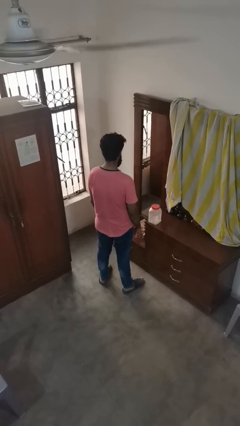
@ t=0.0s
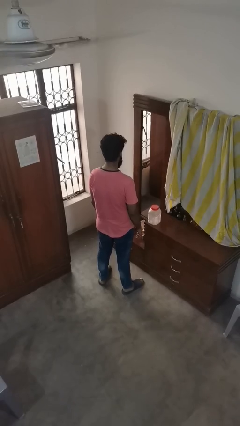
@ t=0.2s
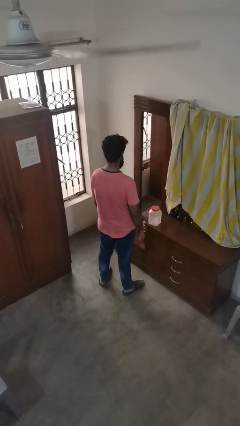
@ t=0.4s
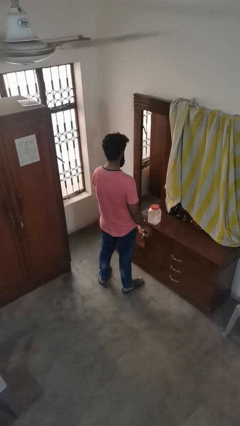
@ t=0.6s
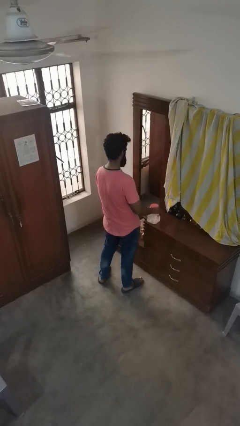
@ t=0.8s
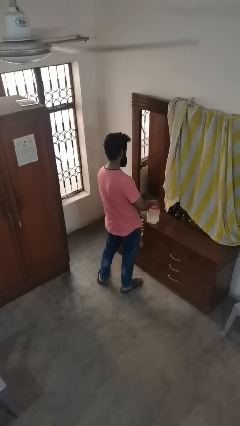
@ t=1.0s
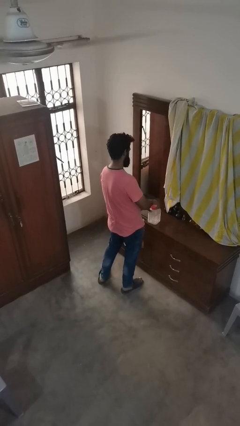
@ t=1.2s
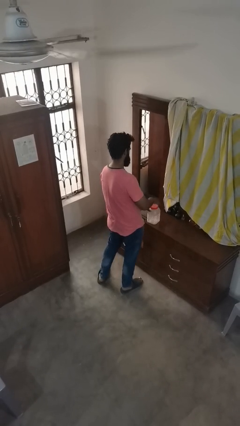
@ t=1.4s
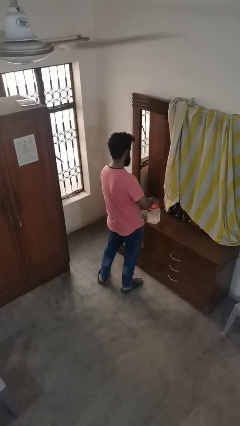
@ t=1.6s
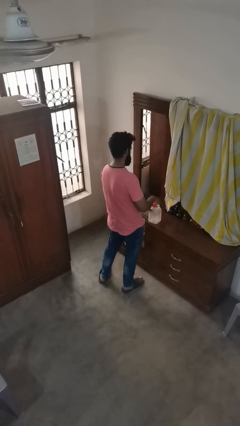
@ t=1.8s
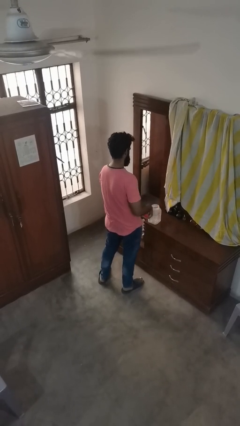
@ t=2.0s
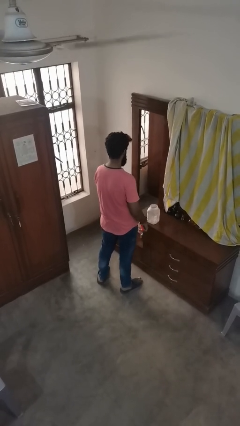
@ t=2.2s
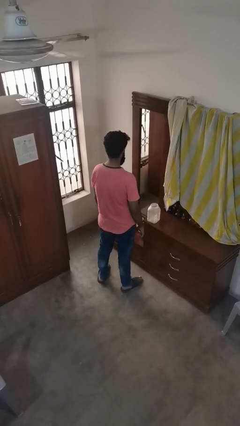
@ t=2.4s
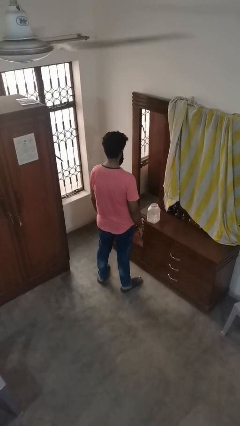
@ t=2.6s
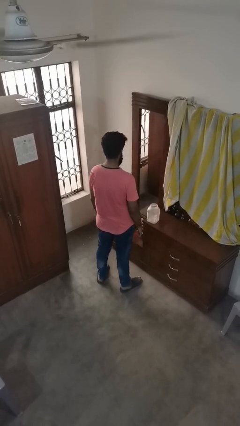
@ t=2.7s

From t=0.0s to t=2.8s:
person opens jar

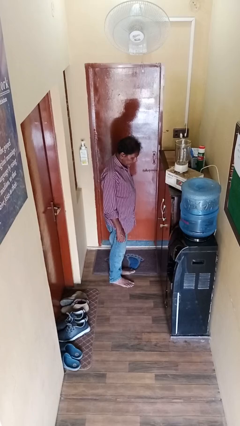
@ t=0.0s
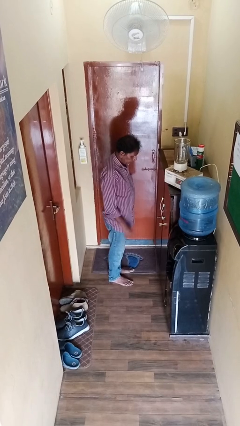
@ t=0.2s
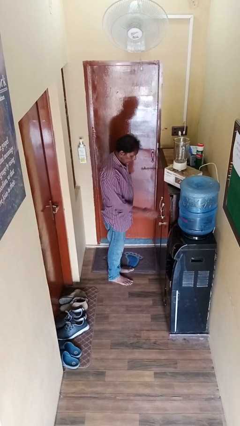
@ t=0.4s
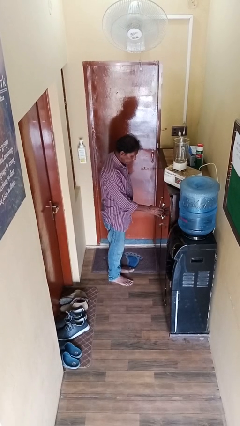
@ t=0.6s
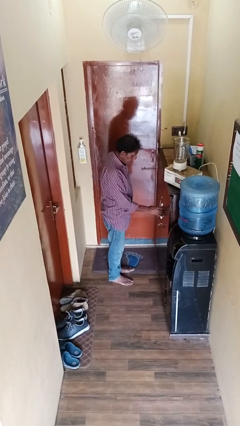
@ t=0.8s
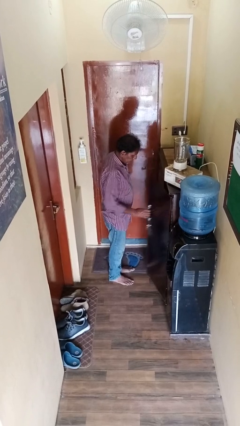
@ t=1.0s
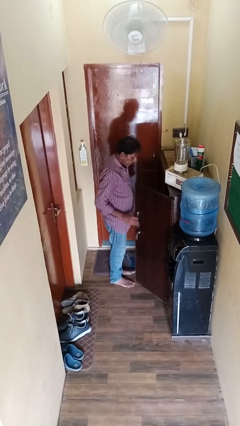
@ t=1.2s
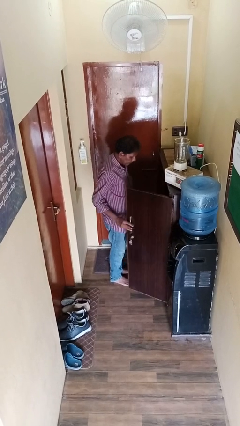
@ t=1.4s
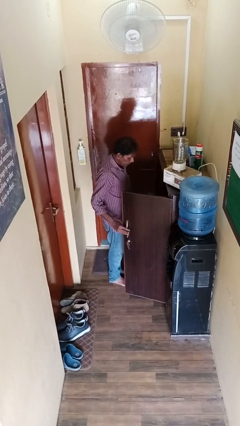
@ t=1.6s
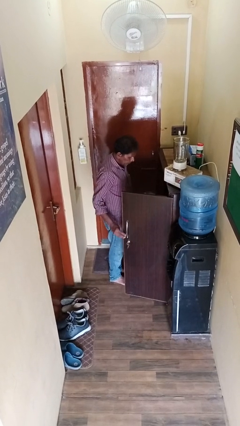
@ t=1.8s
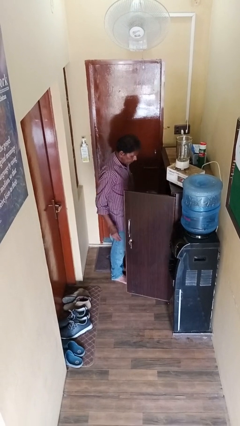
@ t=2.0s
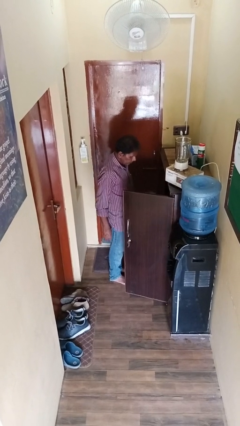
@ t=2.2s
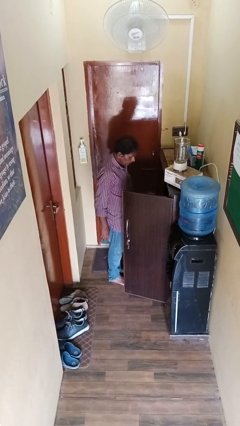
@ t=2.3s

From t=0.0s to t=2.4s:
person opens cabinet

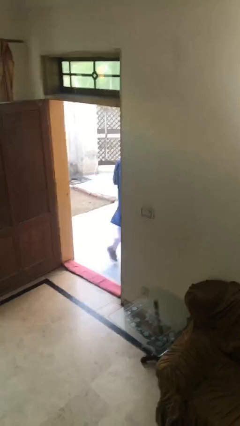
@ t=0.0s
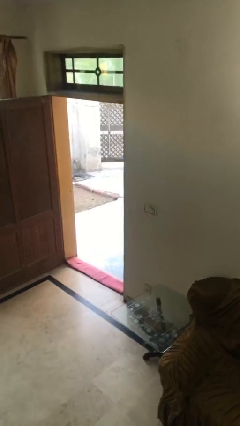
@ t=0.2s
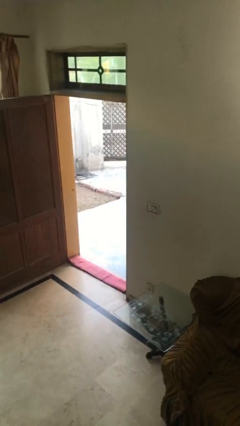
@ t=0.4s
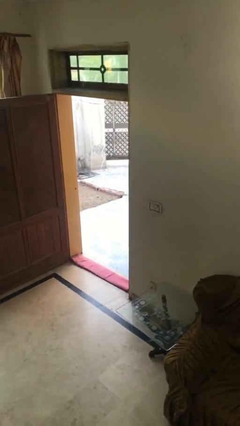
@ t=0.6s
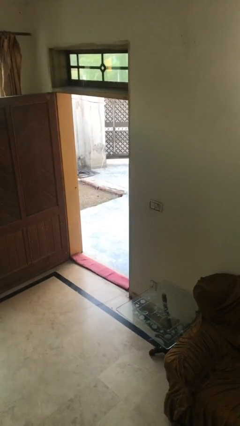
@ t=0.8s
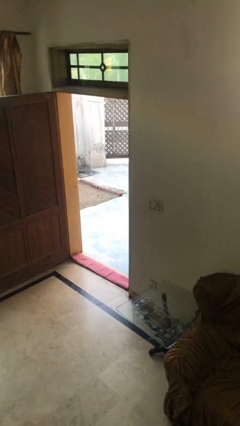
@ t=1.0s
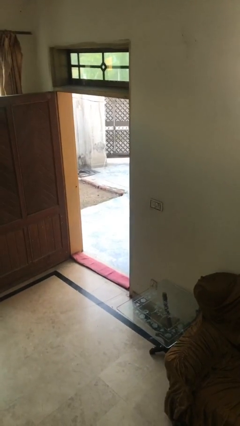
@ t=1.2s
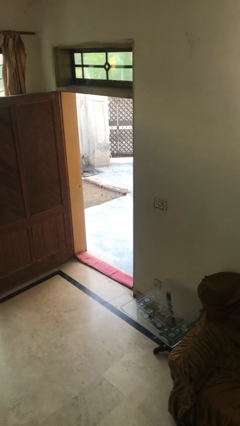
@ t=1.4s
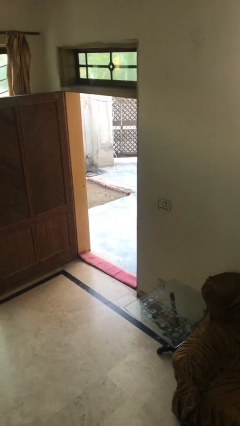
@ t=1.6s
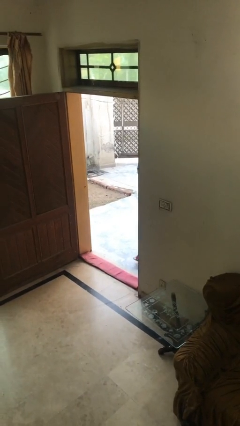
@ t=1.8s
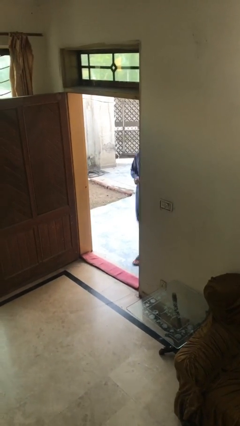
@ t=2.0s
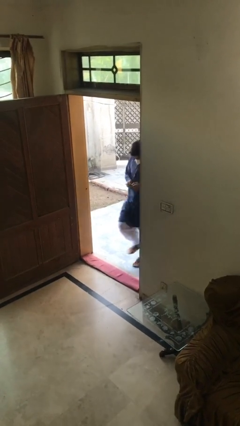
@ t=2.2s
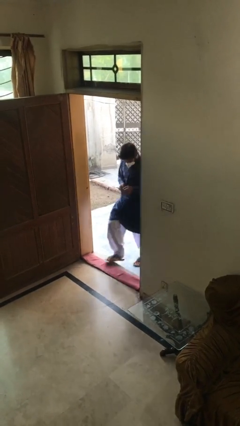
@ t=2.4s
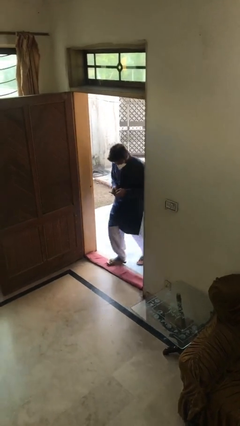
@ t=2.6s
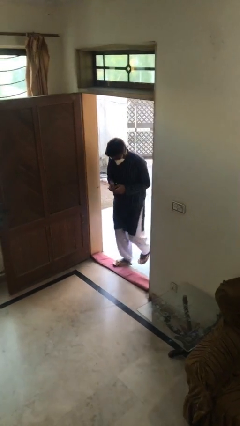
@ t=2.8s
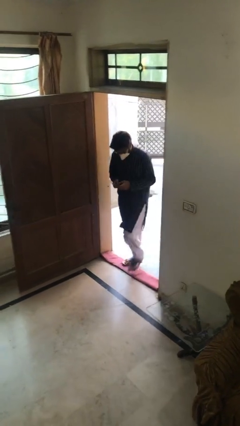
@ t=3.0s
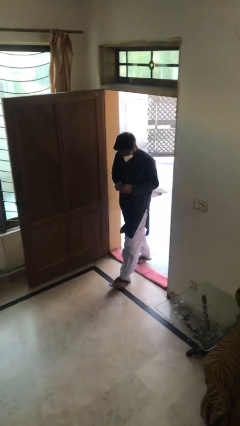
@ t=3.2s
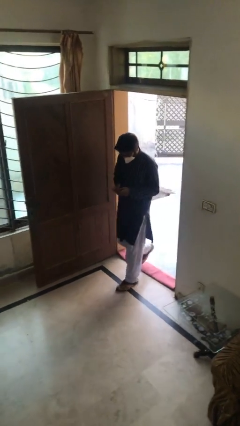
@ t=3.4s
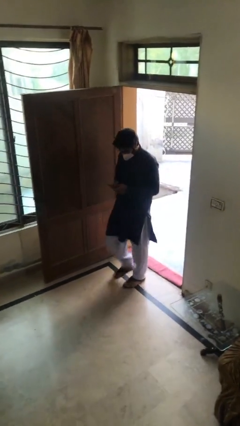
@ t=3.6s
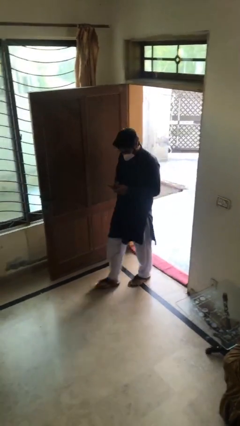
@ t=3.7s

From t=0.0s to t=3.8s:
person enters scene through structure

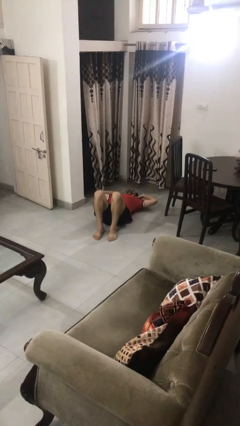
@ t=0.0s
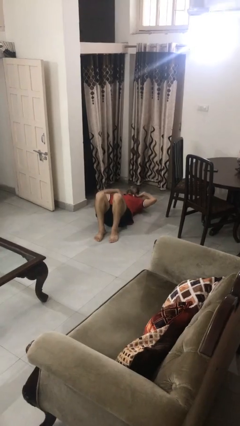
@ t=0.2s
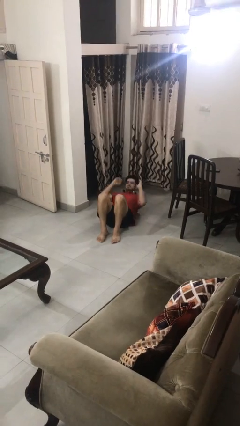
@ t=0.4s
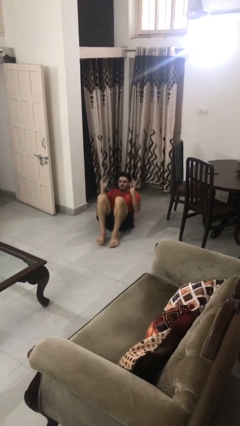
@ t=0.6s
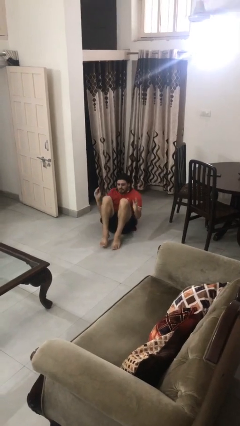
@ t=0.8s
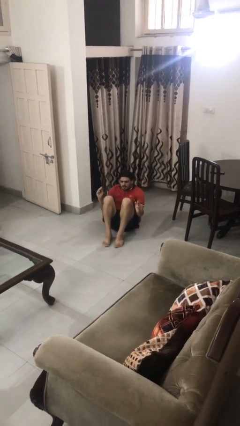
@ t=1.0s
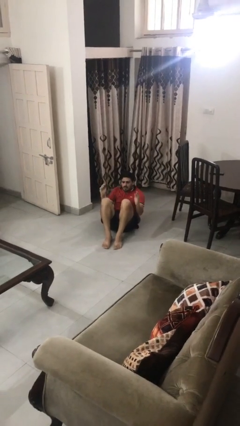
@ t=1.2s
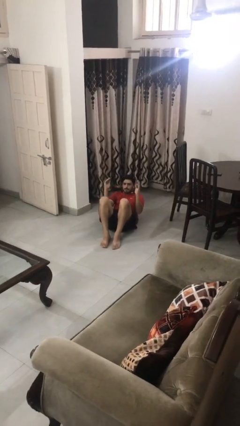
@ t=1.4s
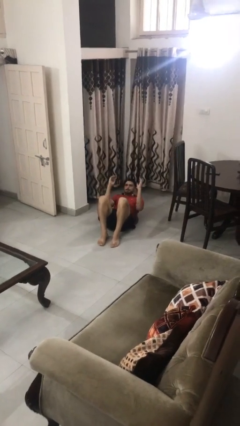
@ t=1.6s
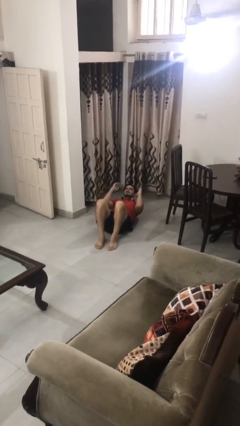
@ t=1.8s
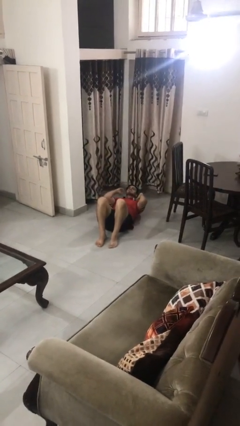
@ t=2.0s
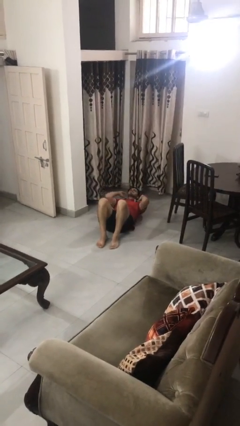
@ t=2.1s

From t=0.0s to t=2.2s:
person exercises with situp

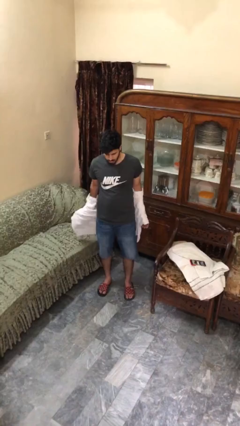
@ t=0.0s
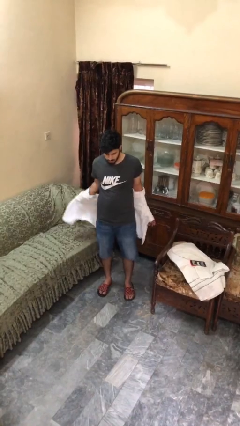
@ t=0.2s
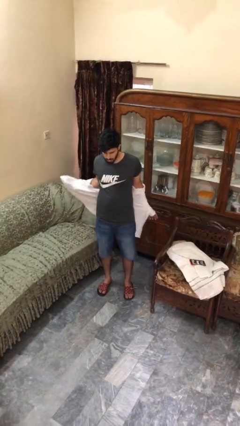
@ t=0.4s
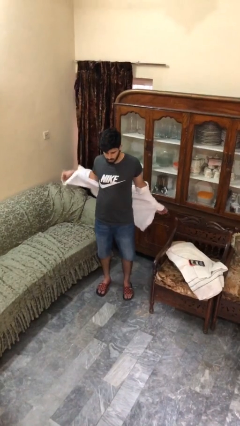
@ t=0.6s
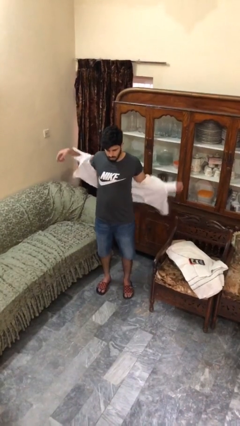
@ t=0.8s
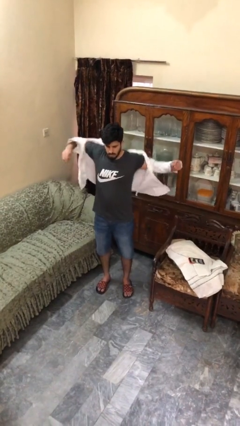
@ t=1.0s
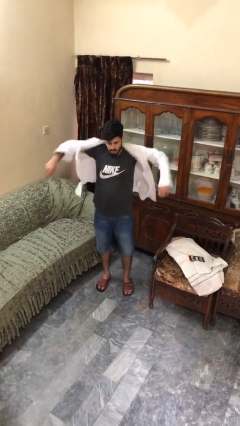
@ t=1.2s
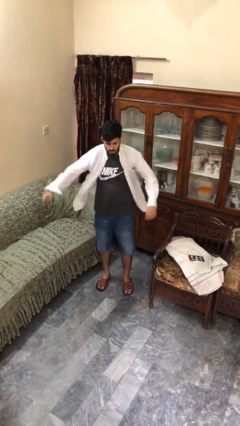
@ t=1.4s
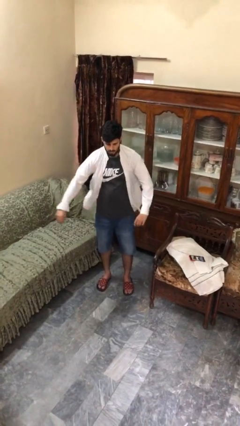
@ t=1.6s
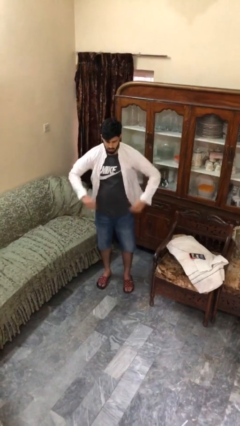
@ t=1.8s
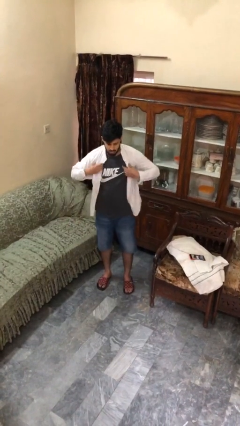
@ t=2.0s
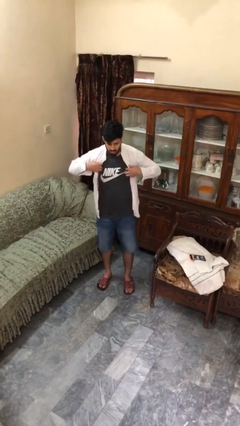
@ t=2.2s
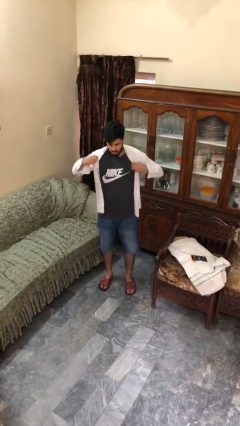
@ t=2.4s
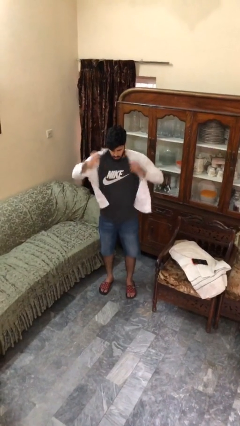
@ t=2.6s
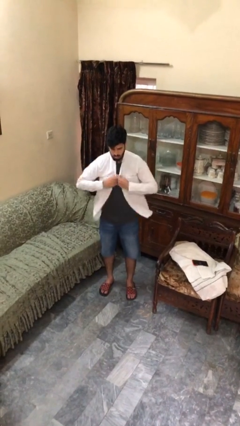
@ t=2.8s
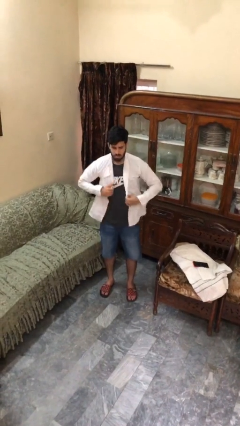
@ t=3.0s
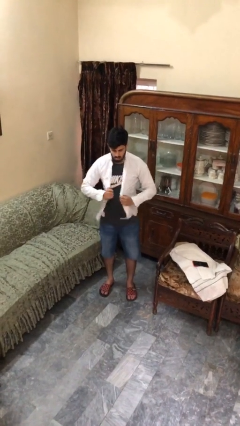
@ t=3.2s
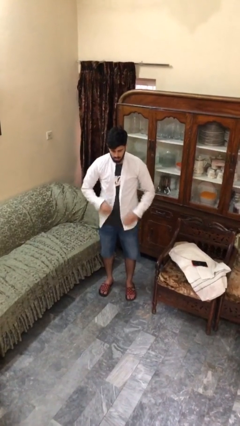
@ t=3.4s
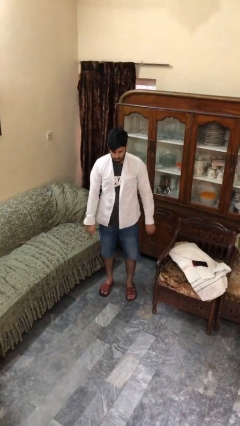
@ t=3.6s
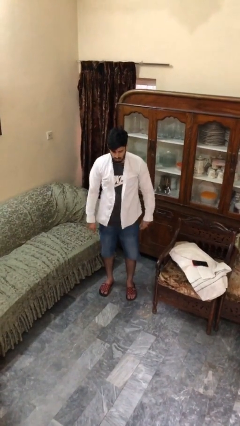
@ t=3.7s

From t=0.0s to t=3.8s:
person puts on shirt

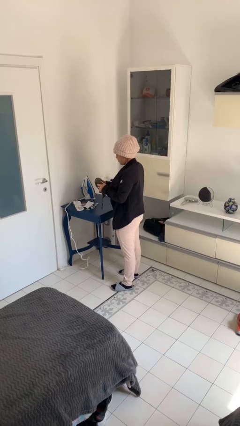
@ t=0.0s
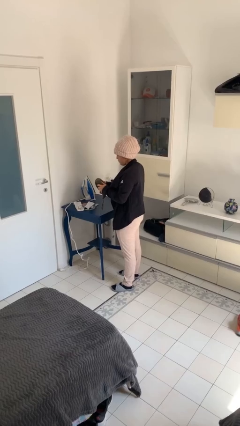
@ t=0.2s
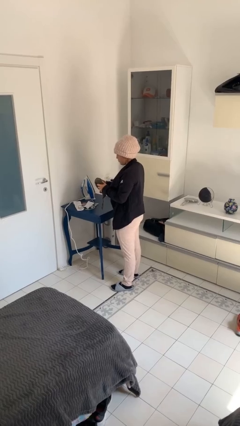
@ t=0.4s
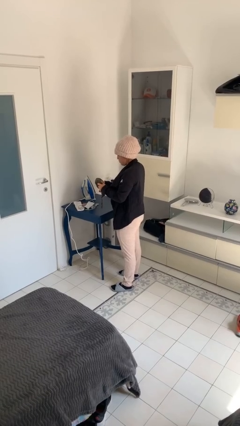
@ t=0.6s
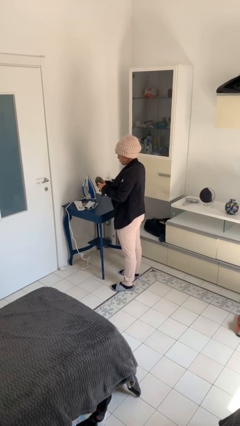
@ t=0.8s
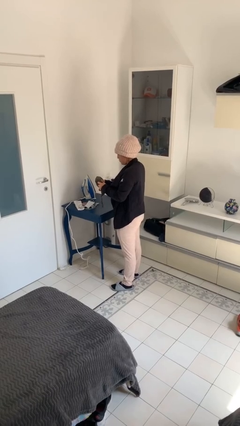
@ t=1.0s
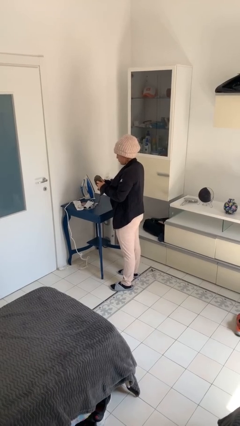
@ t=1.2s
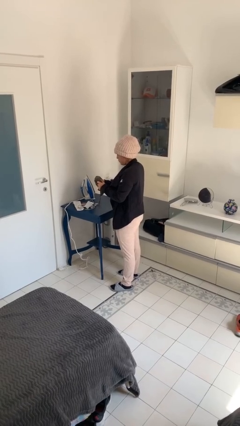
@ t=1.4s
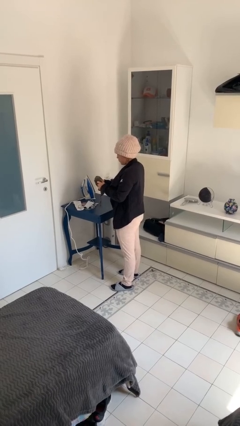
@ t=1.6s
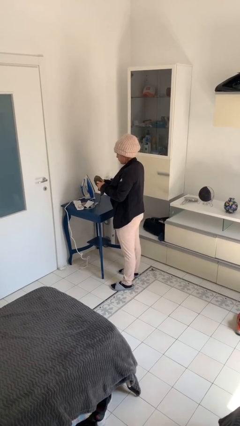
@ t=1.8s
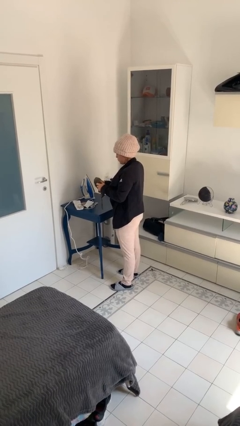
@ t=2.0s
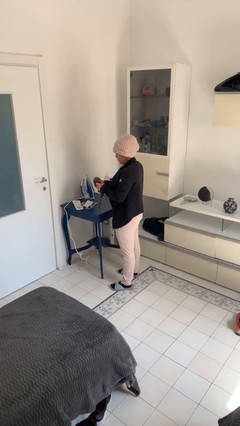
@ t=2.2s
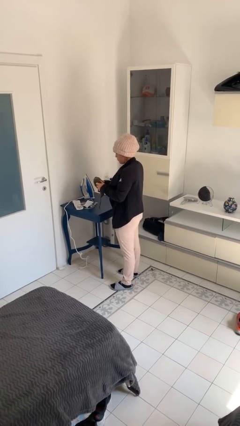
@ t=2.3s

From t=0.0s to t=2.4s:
person squeezes object
